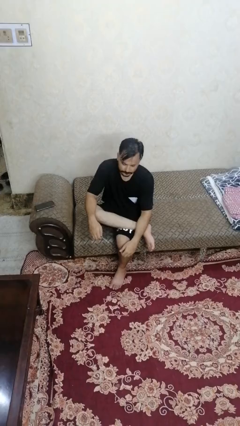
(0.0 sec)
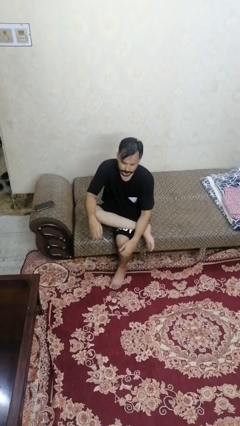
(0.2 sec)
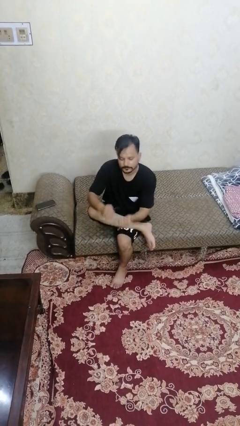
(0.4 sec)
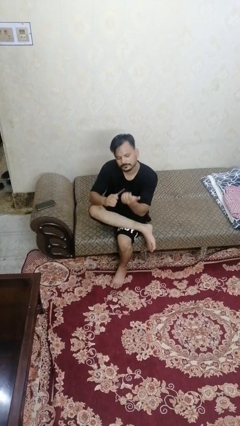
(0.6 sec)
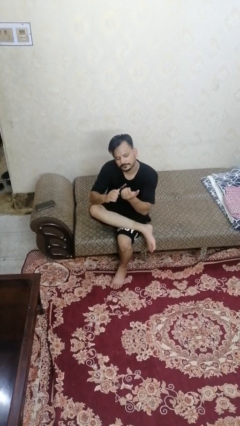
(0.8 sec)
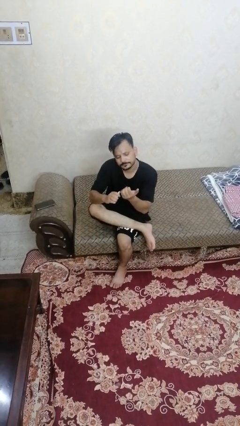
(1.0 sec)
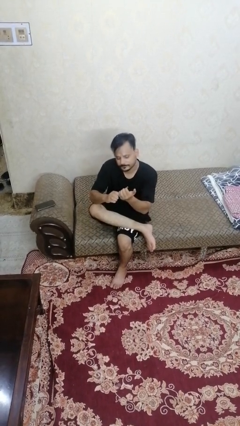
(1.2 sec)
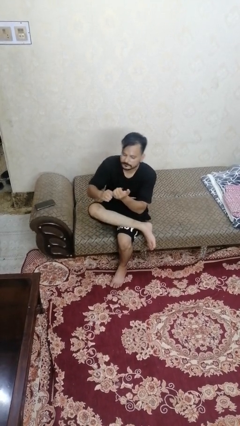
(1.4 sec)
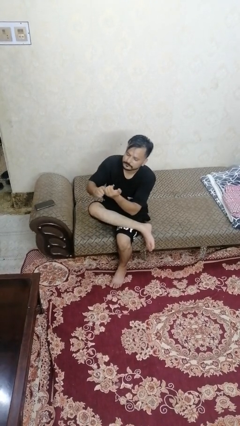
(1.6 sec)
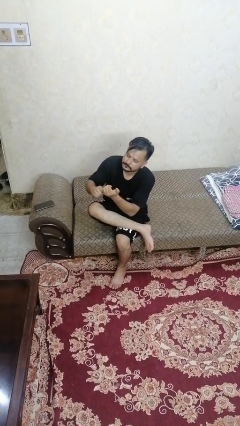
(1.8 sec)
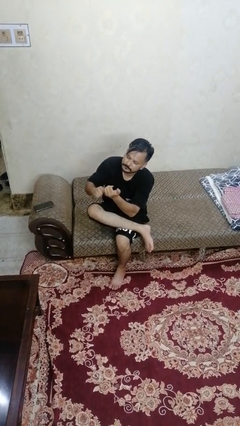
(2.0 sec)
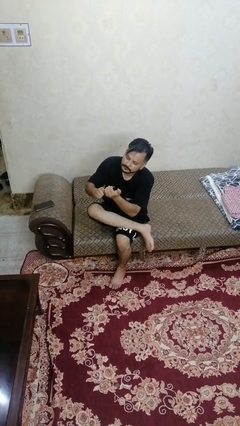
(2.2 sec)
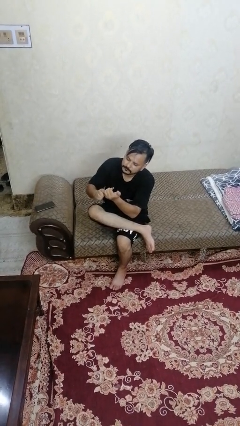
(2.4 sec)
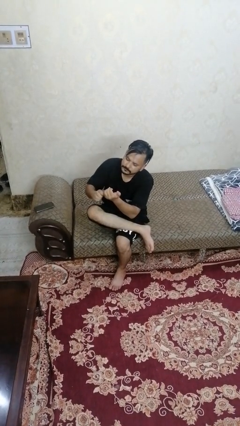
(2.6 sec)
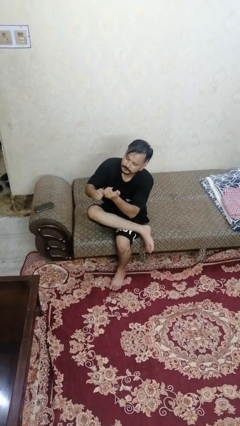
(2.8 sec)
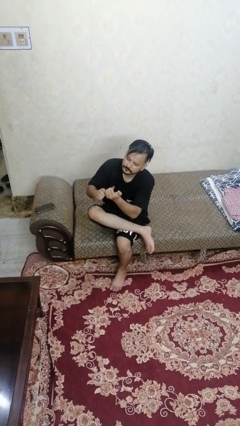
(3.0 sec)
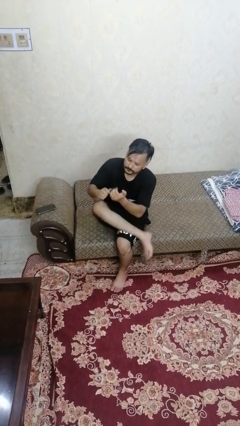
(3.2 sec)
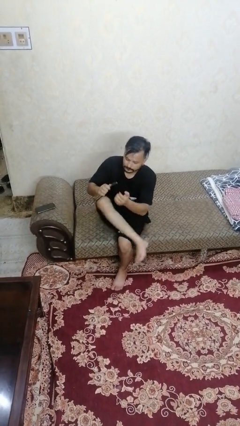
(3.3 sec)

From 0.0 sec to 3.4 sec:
person files fingernails

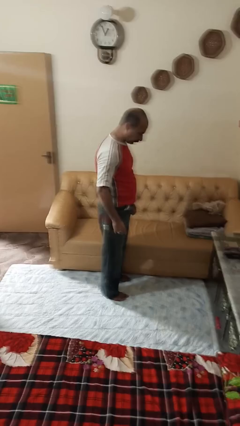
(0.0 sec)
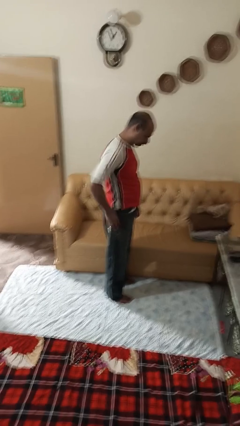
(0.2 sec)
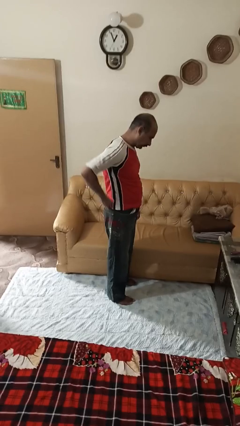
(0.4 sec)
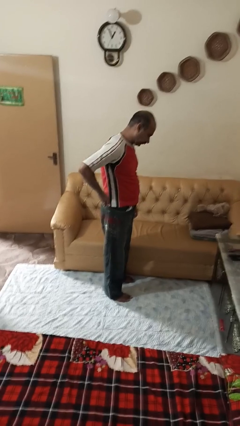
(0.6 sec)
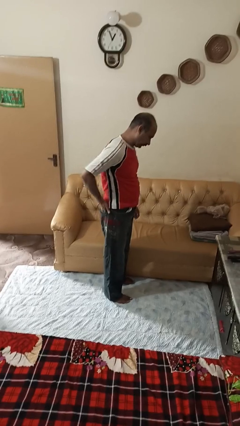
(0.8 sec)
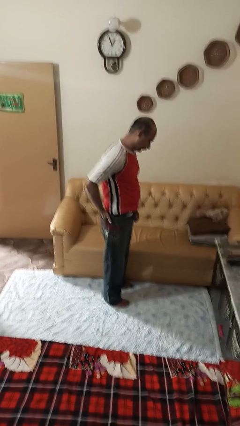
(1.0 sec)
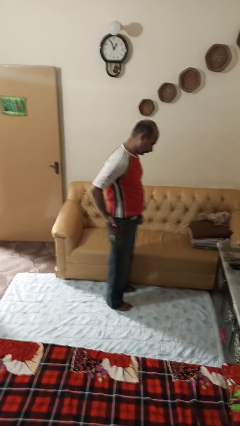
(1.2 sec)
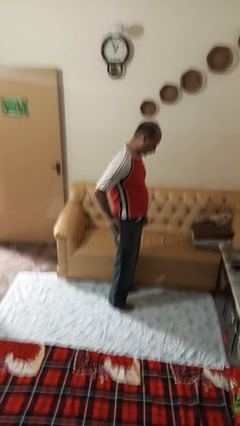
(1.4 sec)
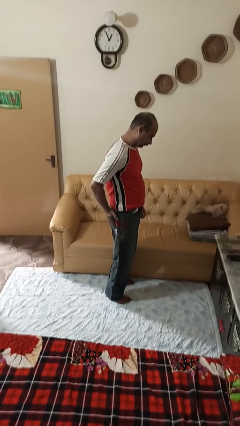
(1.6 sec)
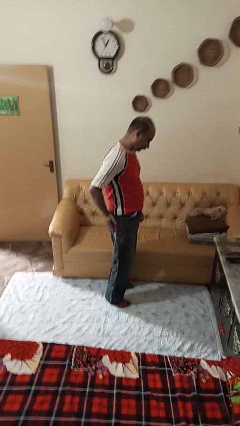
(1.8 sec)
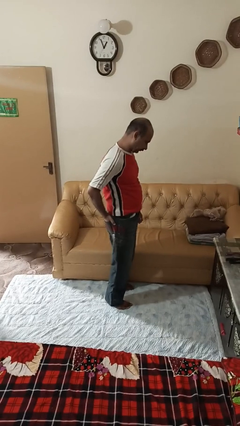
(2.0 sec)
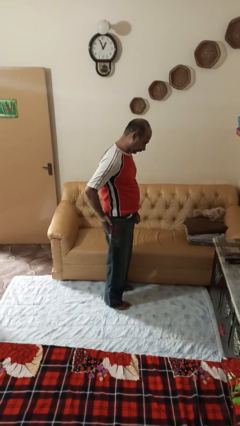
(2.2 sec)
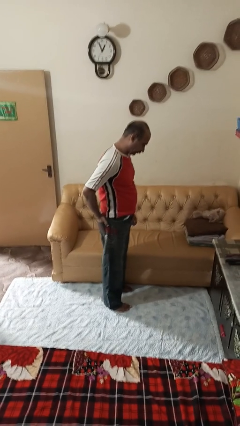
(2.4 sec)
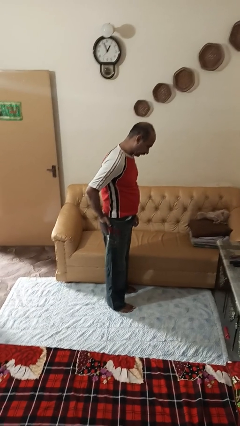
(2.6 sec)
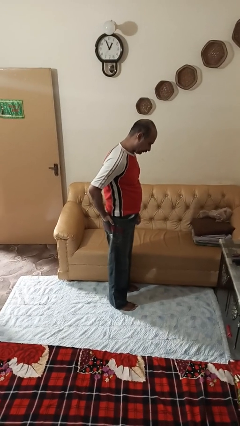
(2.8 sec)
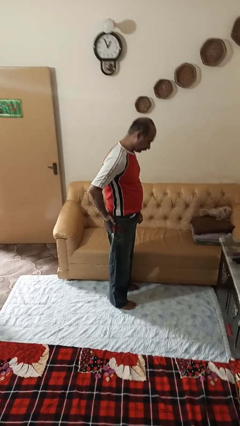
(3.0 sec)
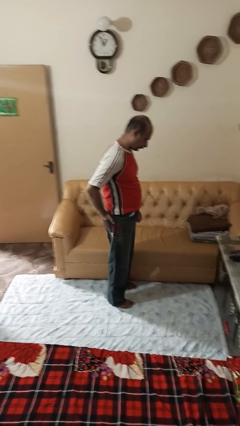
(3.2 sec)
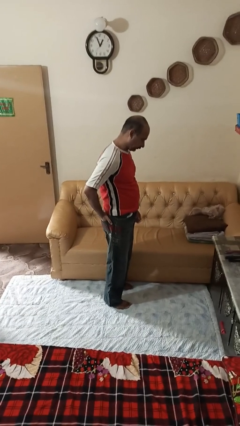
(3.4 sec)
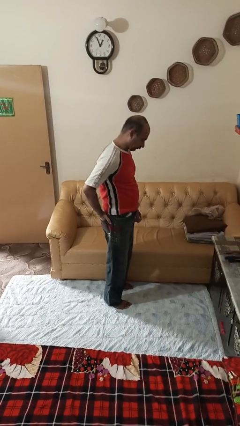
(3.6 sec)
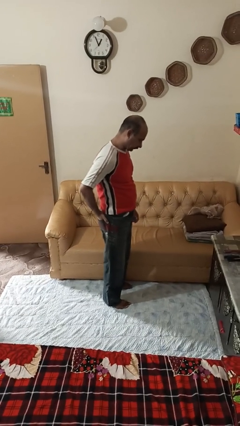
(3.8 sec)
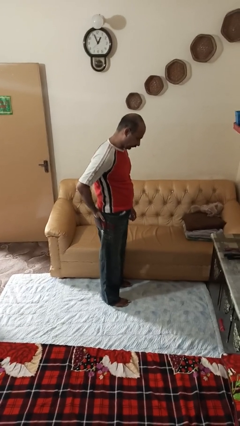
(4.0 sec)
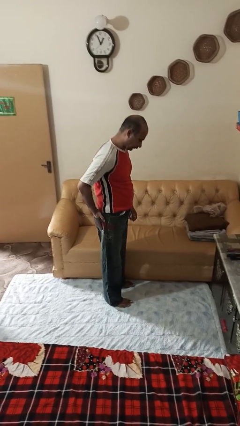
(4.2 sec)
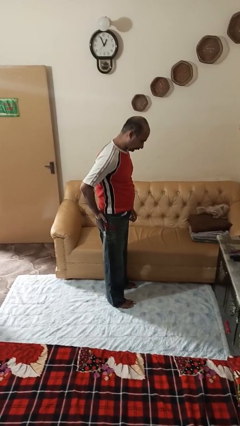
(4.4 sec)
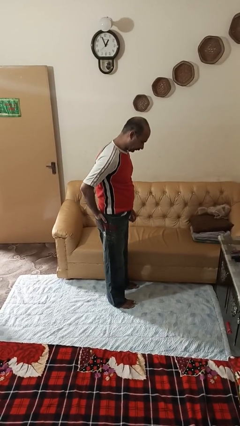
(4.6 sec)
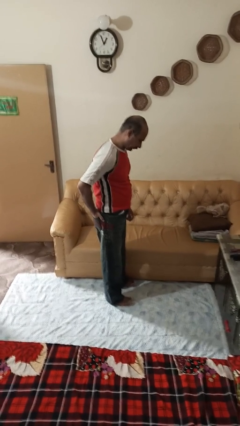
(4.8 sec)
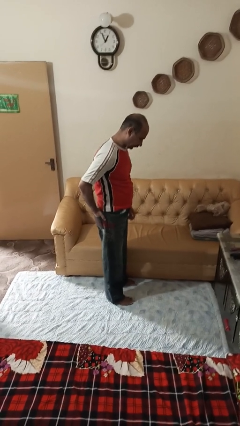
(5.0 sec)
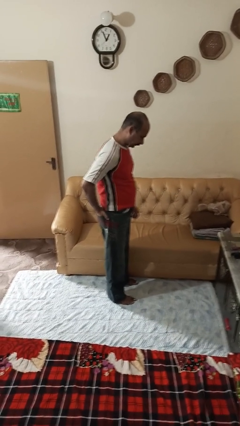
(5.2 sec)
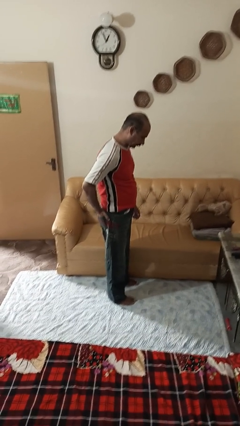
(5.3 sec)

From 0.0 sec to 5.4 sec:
person puts hands in back pockets

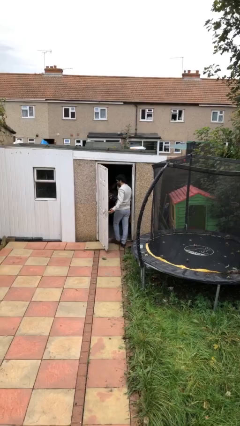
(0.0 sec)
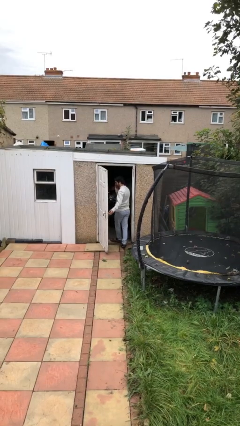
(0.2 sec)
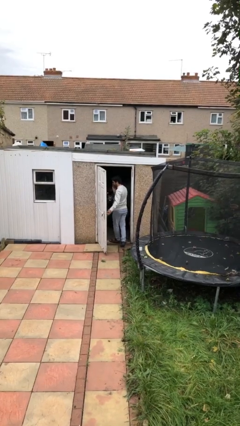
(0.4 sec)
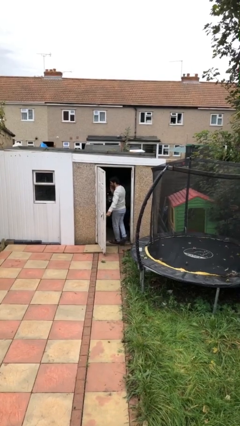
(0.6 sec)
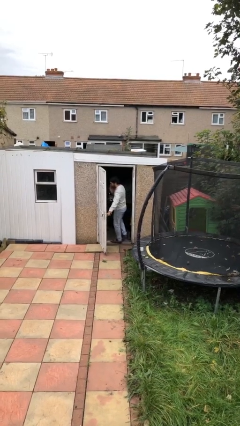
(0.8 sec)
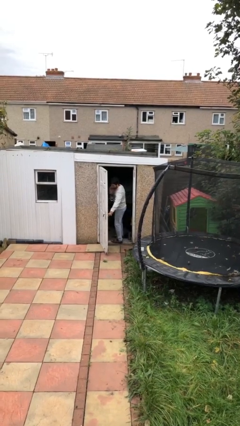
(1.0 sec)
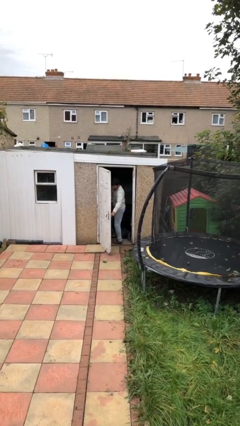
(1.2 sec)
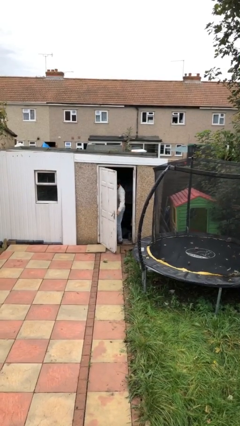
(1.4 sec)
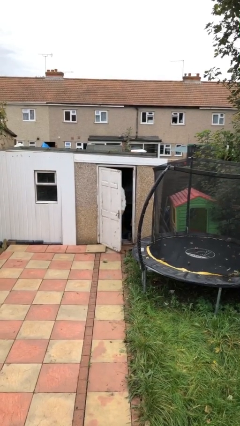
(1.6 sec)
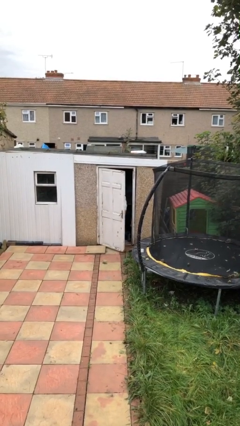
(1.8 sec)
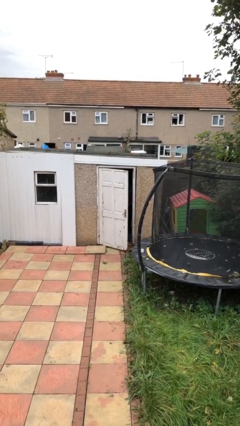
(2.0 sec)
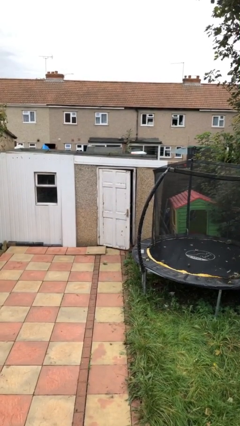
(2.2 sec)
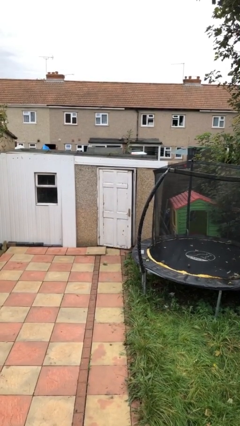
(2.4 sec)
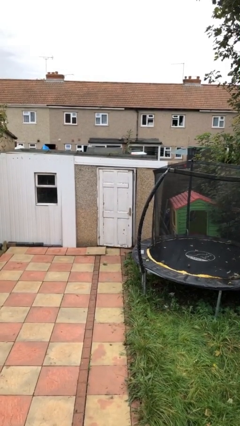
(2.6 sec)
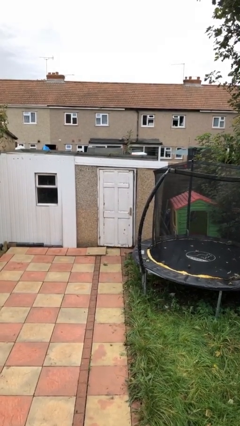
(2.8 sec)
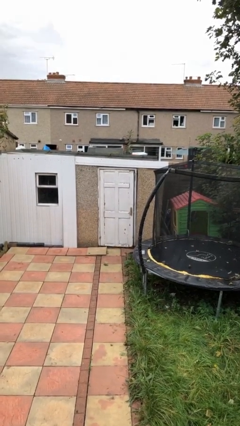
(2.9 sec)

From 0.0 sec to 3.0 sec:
person closes facility door

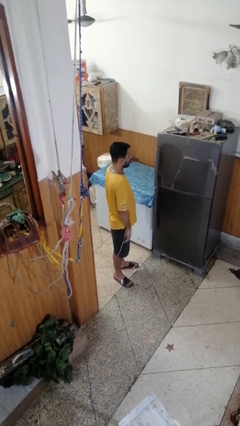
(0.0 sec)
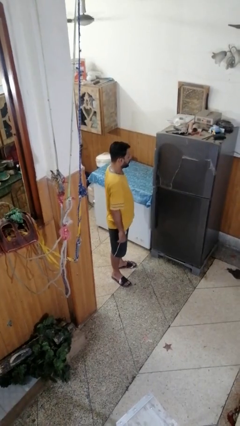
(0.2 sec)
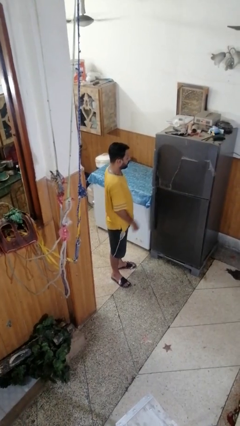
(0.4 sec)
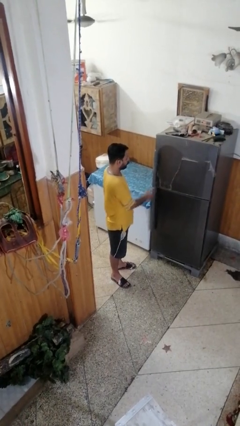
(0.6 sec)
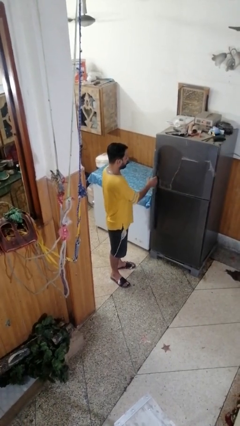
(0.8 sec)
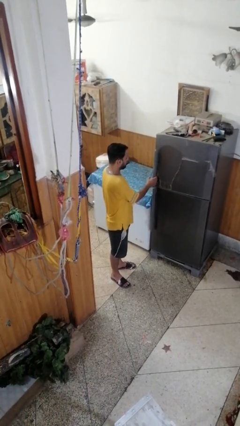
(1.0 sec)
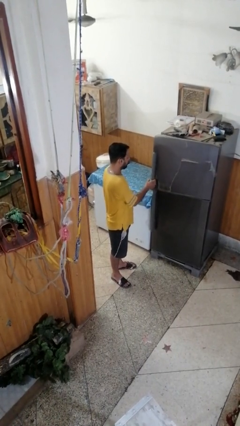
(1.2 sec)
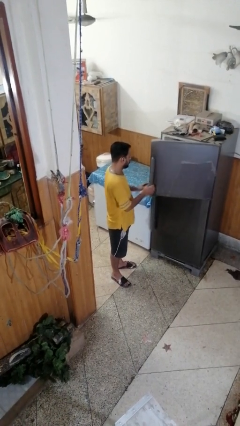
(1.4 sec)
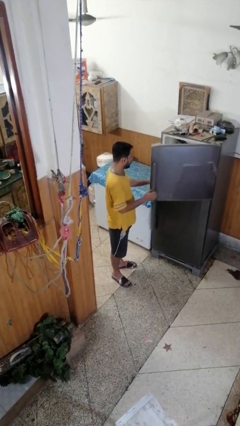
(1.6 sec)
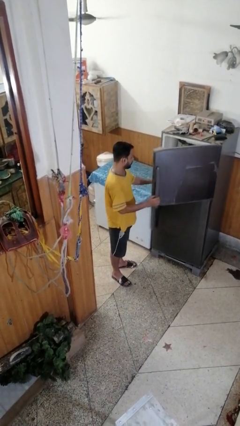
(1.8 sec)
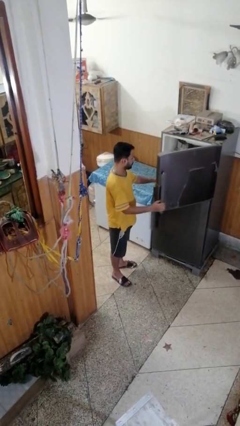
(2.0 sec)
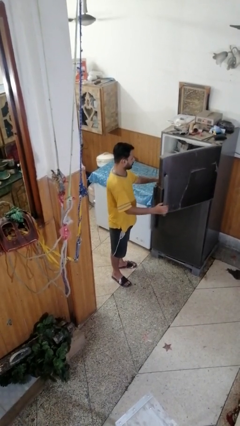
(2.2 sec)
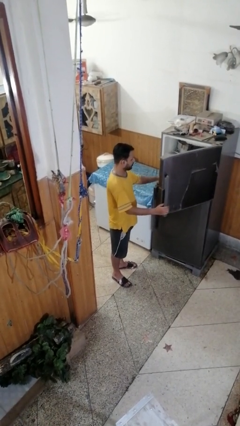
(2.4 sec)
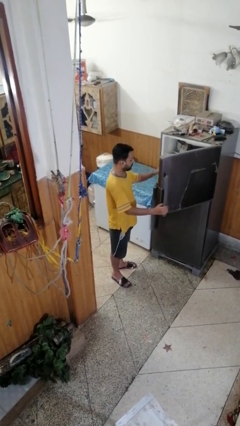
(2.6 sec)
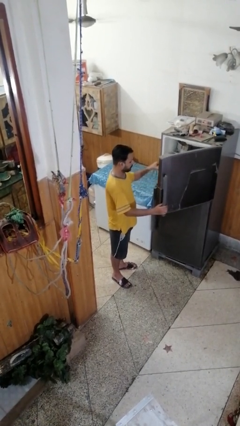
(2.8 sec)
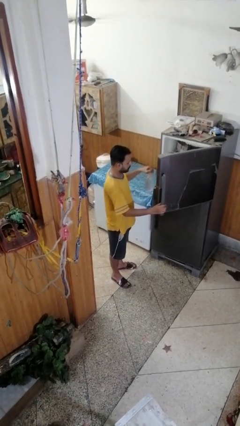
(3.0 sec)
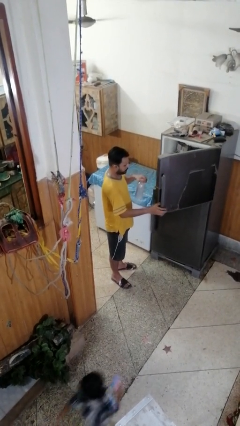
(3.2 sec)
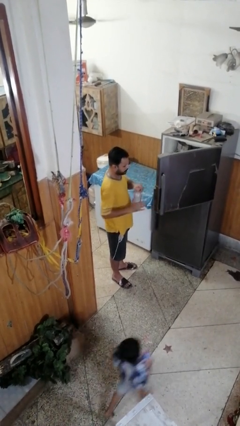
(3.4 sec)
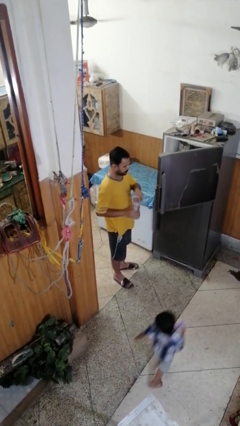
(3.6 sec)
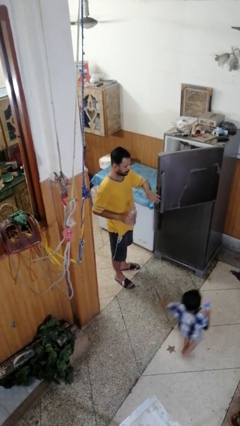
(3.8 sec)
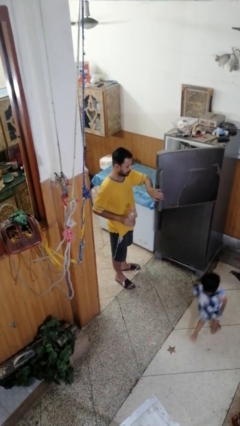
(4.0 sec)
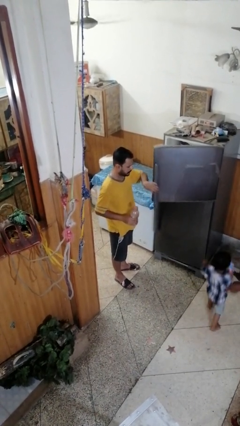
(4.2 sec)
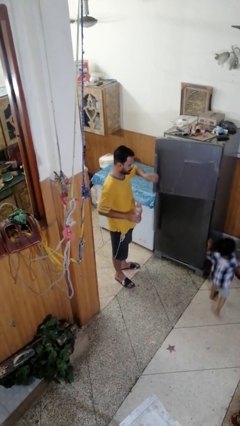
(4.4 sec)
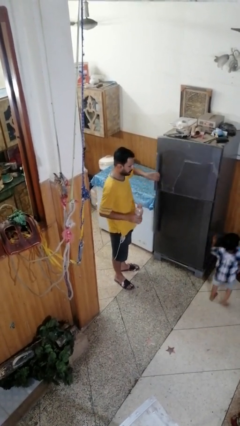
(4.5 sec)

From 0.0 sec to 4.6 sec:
person takes object from refrigerator

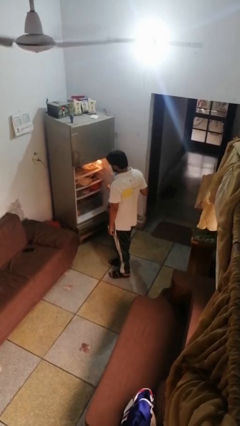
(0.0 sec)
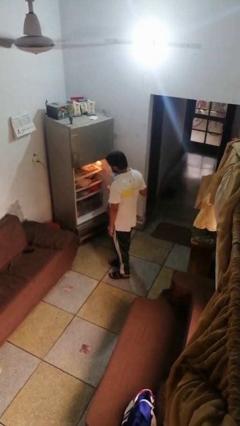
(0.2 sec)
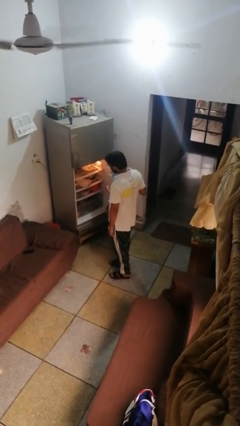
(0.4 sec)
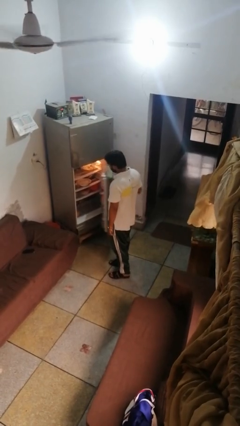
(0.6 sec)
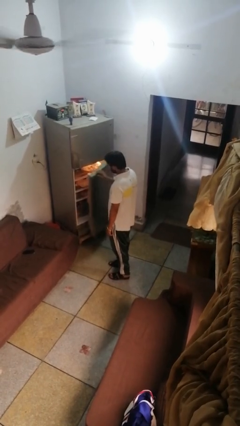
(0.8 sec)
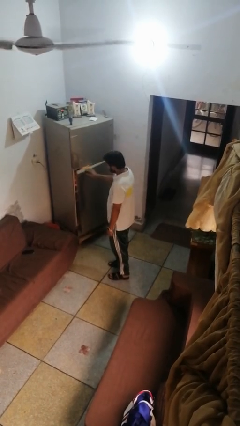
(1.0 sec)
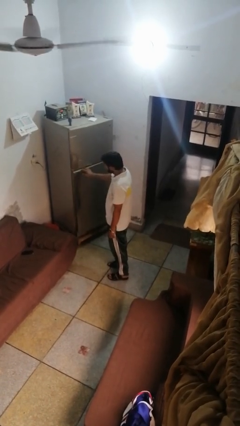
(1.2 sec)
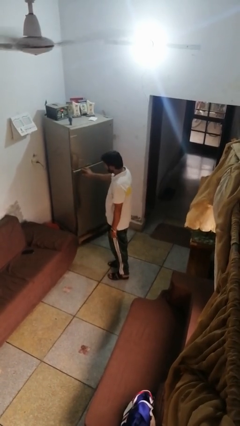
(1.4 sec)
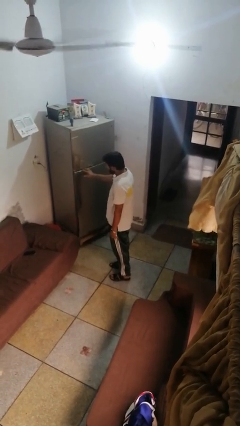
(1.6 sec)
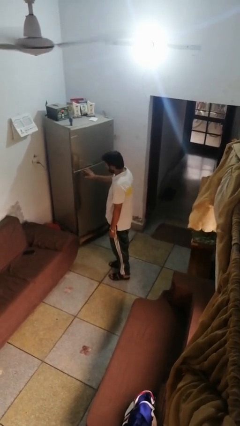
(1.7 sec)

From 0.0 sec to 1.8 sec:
person closes refrigerator
